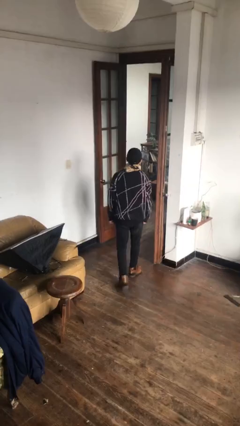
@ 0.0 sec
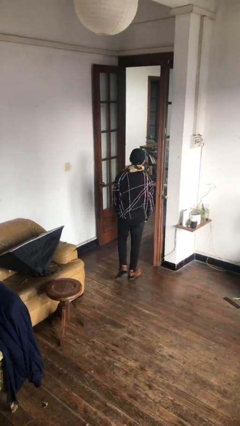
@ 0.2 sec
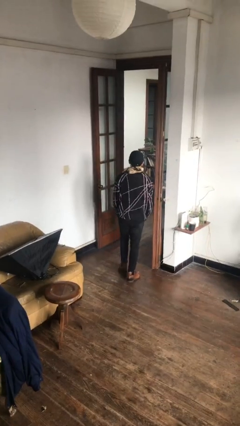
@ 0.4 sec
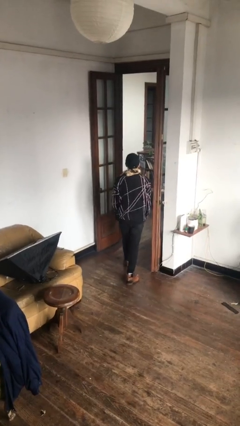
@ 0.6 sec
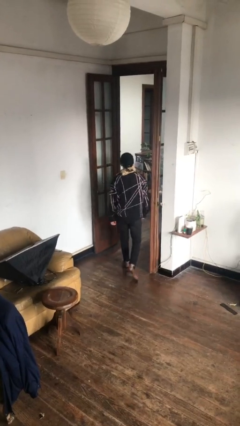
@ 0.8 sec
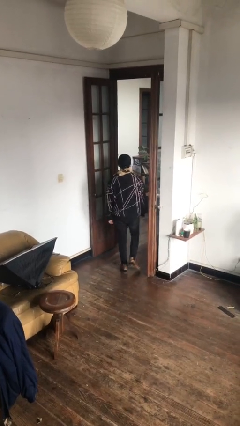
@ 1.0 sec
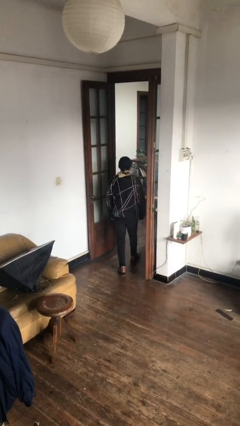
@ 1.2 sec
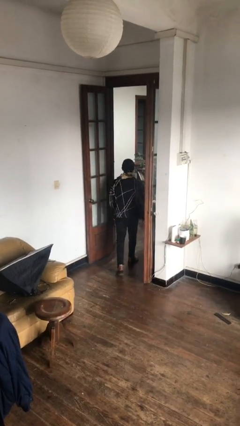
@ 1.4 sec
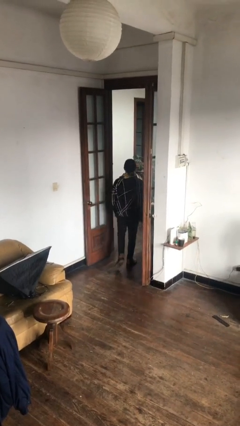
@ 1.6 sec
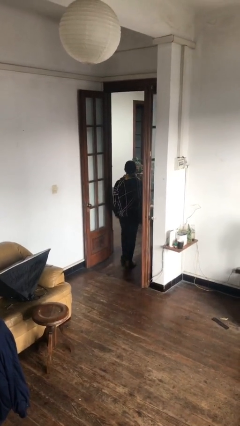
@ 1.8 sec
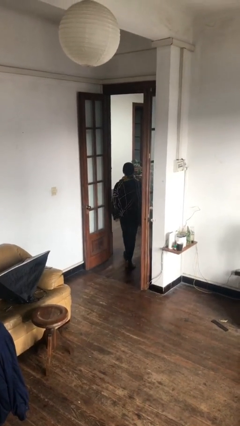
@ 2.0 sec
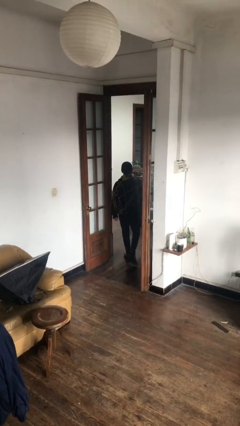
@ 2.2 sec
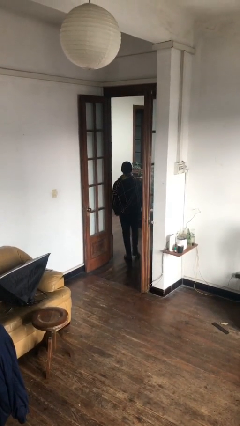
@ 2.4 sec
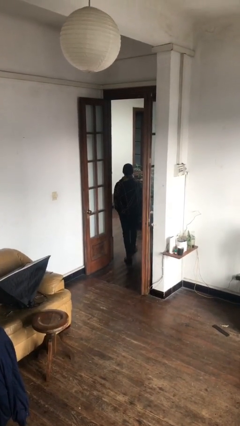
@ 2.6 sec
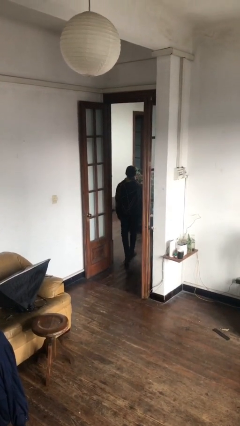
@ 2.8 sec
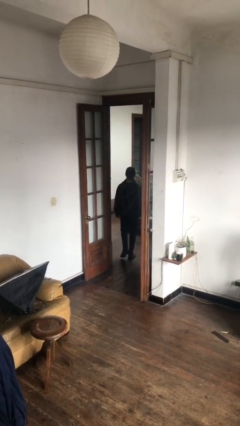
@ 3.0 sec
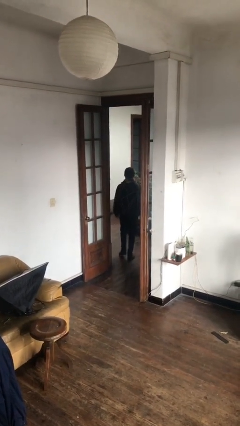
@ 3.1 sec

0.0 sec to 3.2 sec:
person exits scene through structure

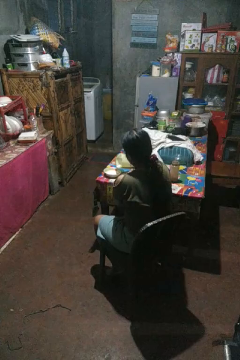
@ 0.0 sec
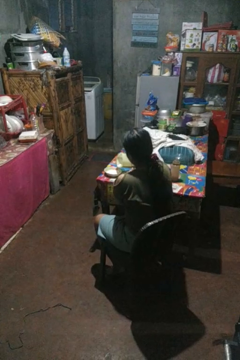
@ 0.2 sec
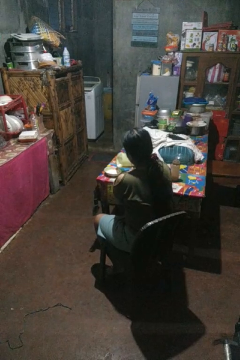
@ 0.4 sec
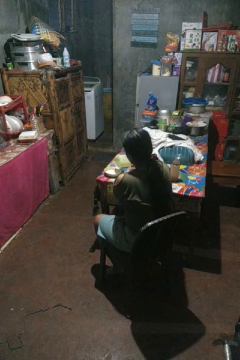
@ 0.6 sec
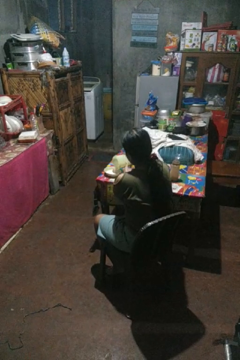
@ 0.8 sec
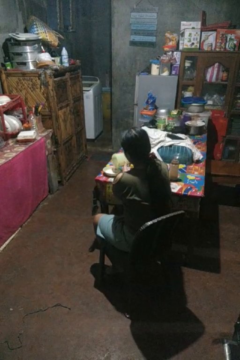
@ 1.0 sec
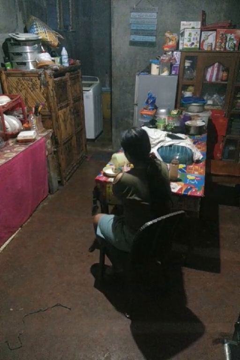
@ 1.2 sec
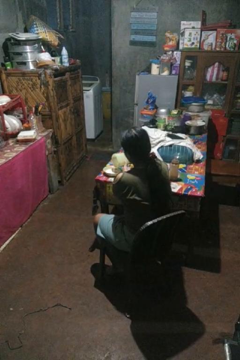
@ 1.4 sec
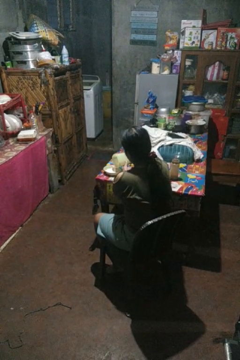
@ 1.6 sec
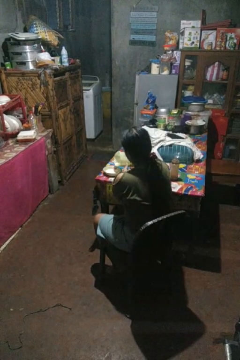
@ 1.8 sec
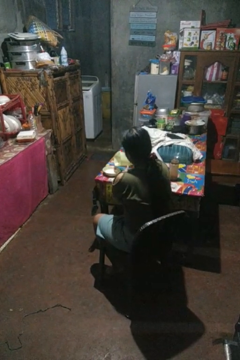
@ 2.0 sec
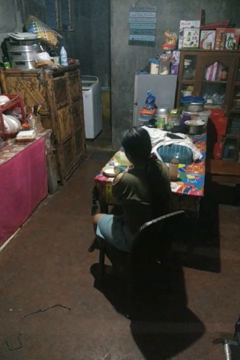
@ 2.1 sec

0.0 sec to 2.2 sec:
person pours into bowl

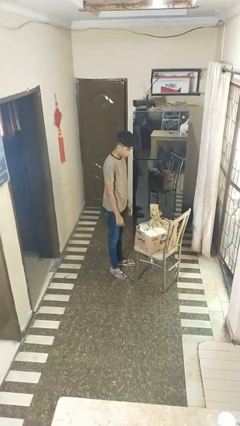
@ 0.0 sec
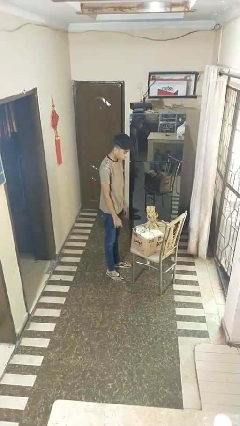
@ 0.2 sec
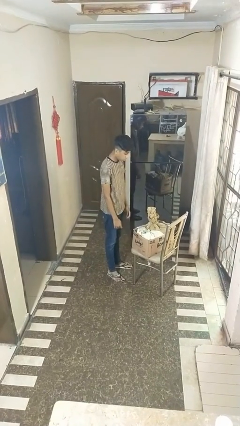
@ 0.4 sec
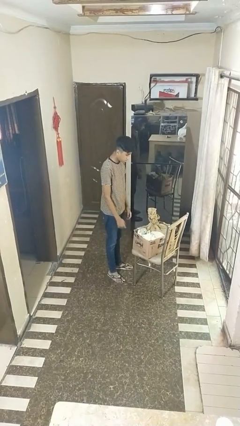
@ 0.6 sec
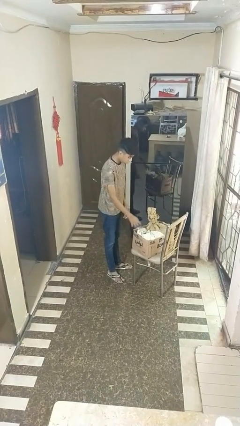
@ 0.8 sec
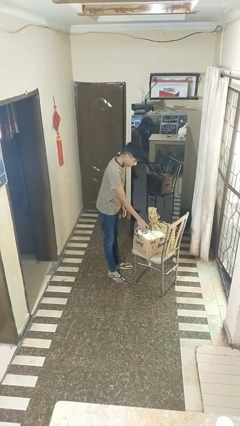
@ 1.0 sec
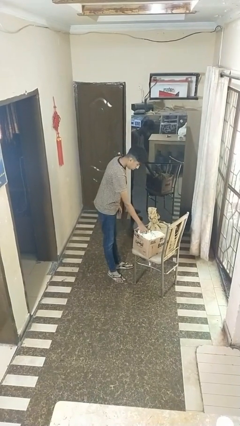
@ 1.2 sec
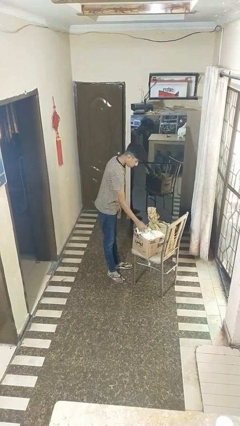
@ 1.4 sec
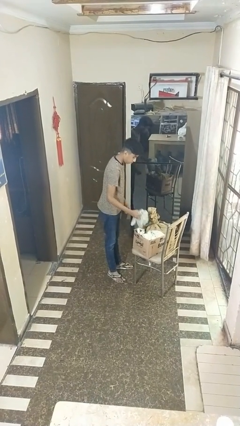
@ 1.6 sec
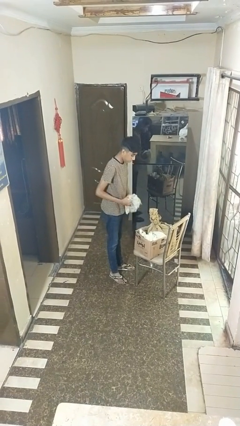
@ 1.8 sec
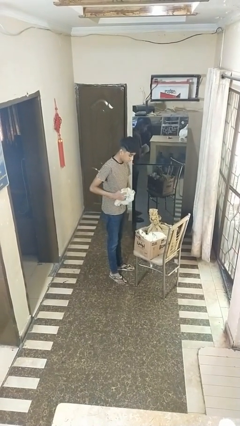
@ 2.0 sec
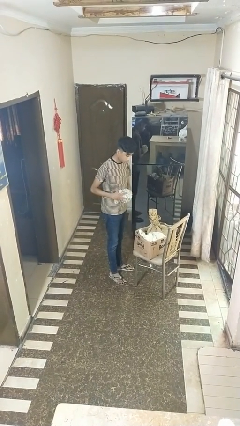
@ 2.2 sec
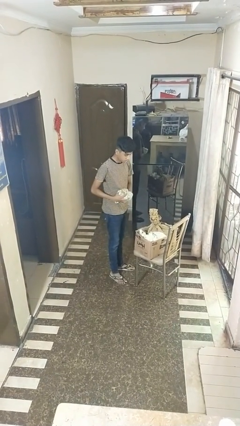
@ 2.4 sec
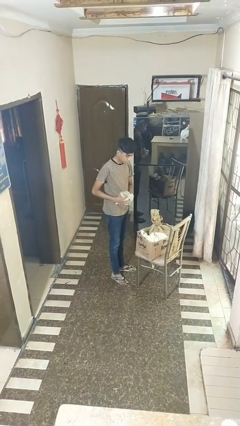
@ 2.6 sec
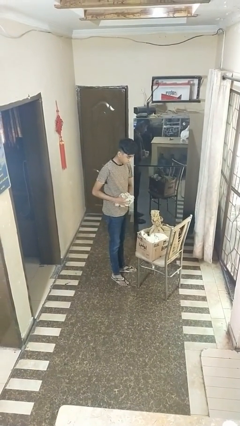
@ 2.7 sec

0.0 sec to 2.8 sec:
person takes object from box

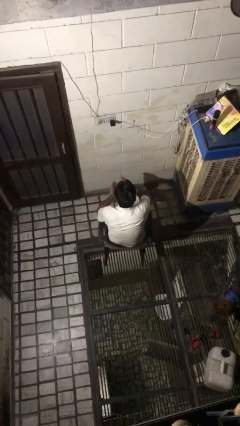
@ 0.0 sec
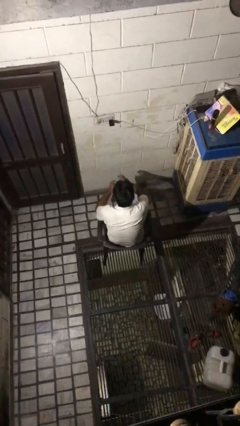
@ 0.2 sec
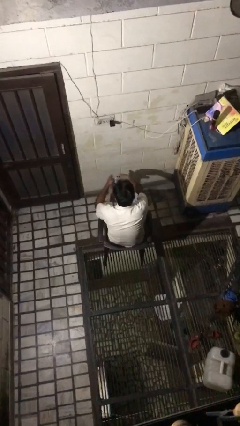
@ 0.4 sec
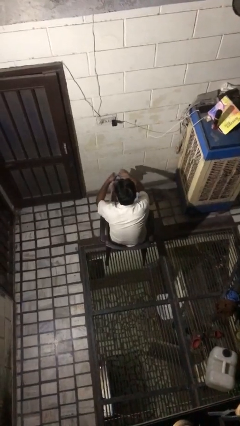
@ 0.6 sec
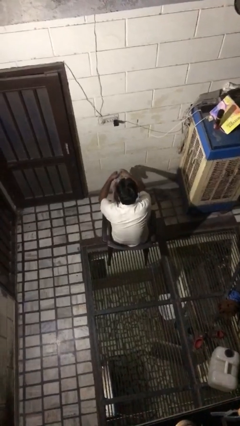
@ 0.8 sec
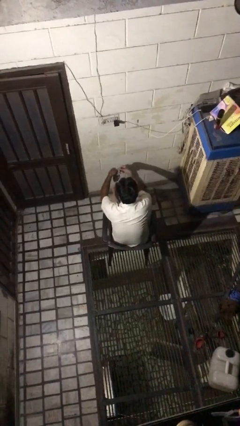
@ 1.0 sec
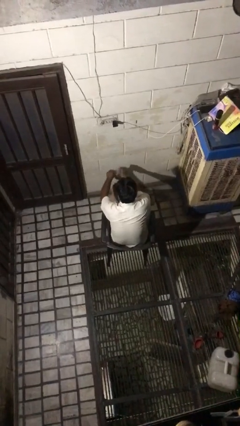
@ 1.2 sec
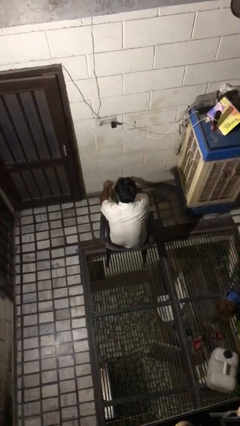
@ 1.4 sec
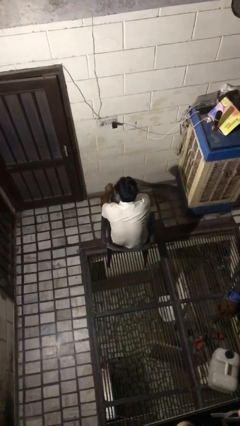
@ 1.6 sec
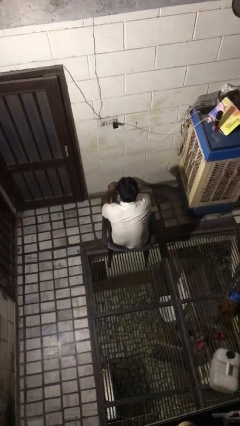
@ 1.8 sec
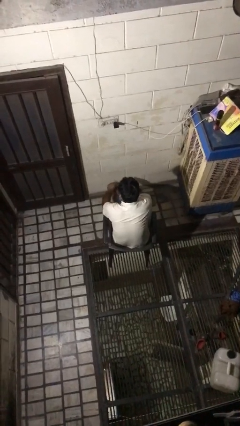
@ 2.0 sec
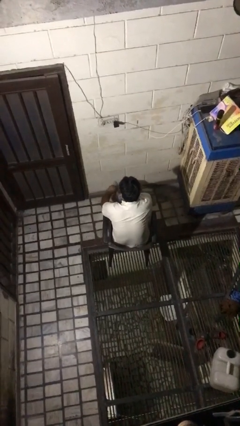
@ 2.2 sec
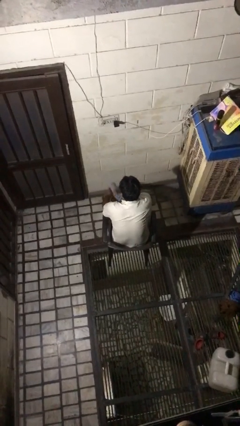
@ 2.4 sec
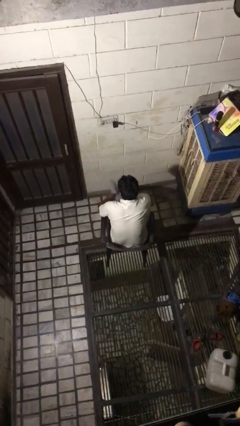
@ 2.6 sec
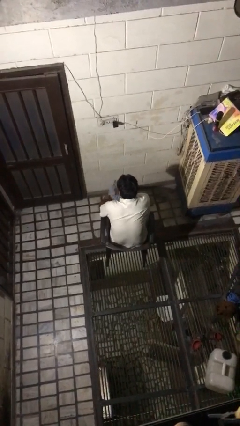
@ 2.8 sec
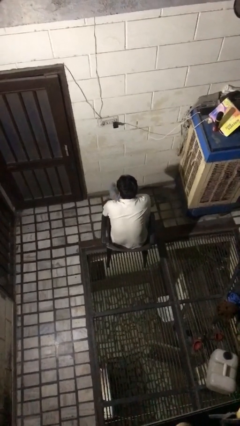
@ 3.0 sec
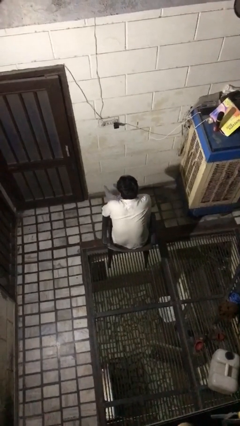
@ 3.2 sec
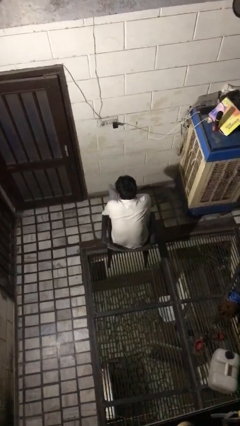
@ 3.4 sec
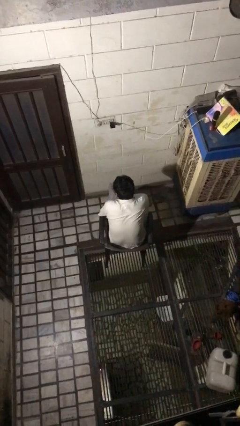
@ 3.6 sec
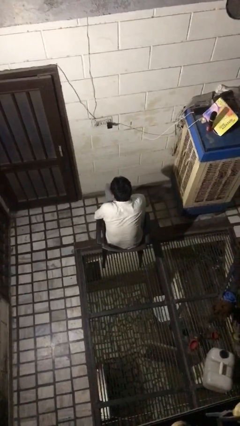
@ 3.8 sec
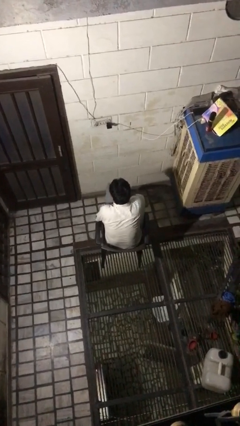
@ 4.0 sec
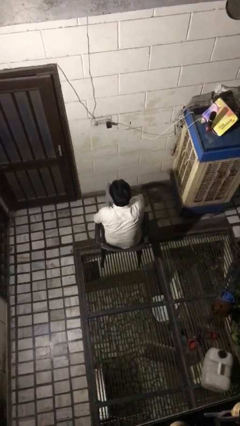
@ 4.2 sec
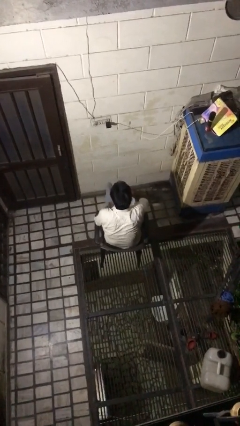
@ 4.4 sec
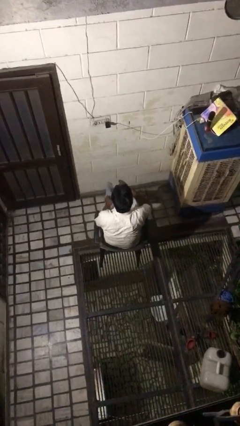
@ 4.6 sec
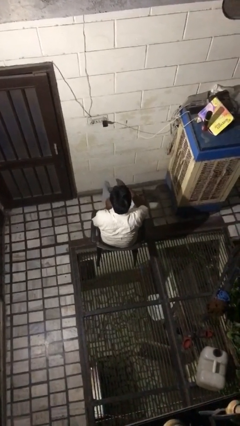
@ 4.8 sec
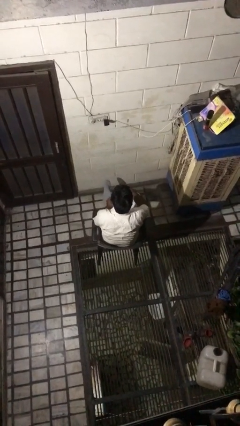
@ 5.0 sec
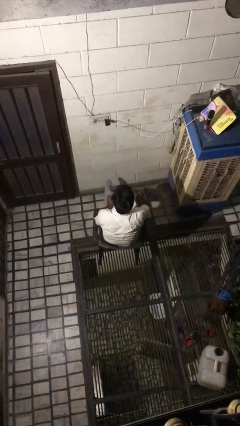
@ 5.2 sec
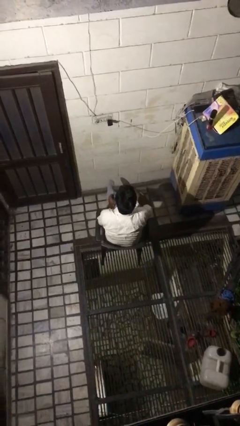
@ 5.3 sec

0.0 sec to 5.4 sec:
person puts on socks

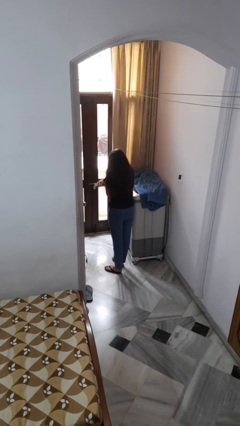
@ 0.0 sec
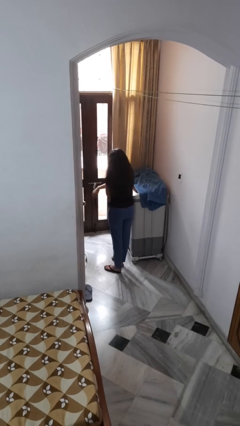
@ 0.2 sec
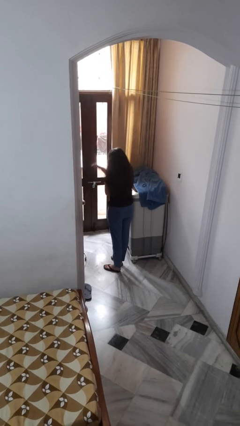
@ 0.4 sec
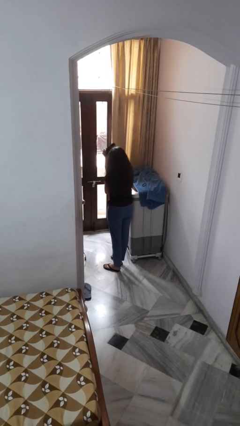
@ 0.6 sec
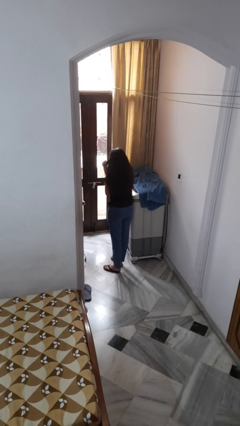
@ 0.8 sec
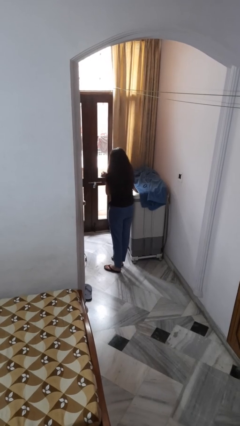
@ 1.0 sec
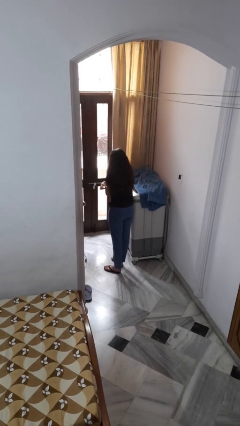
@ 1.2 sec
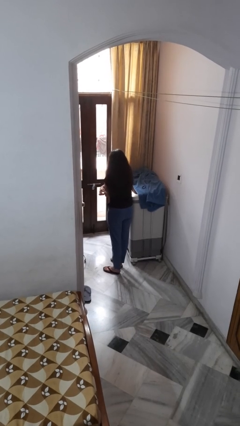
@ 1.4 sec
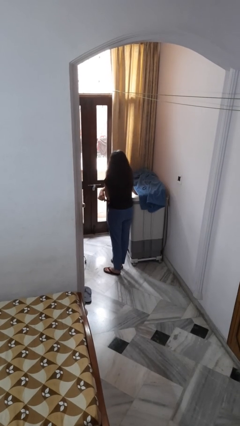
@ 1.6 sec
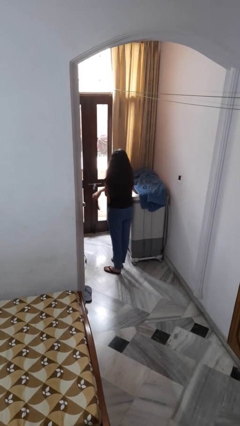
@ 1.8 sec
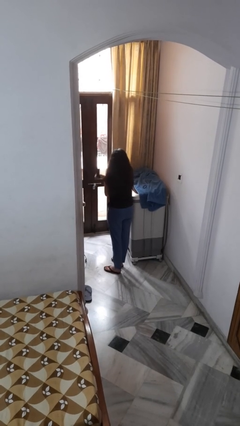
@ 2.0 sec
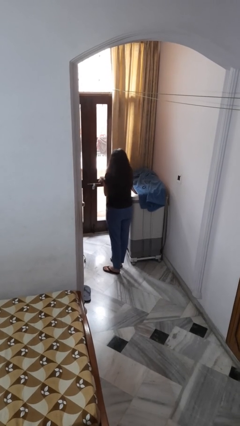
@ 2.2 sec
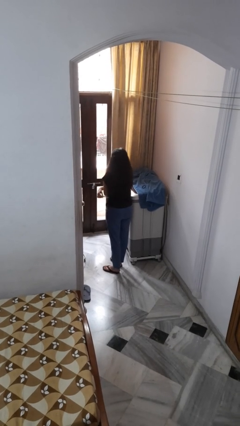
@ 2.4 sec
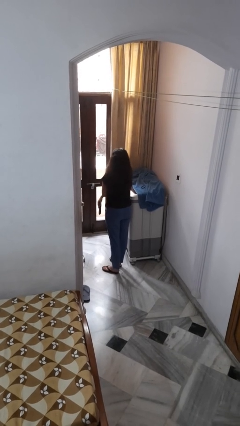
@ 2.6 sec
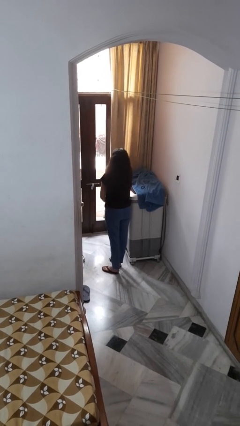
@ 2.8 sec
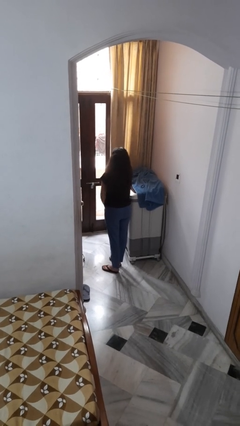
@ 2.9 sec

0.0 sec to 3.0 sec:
person brushes hair

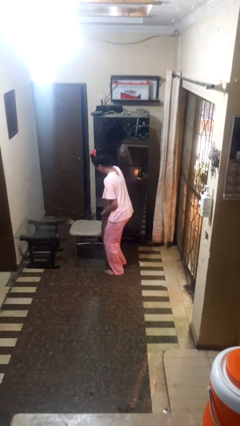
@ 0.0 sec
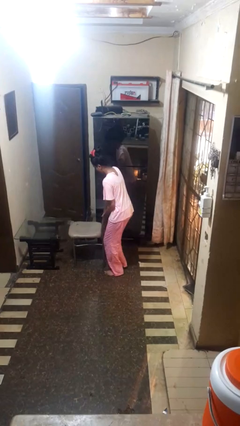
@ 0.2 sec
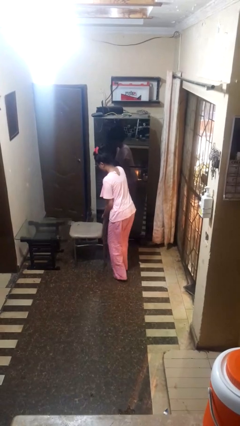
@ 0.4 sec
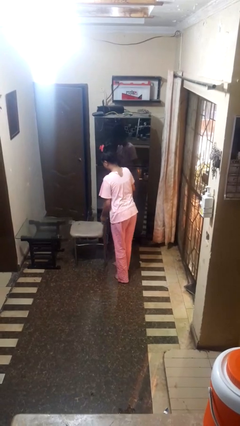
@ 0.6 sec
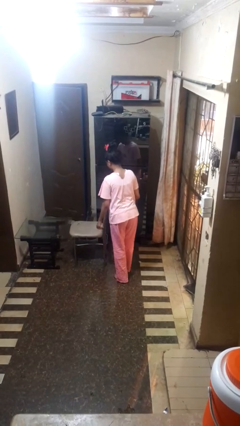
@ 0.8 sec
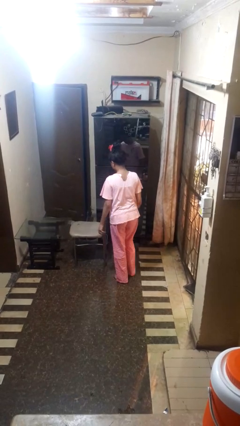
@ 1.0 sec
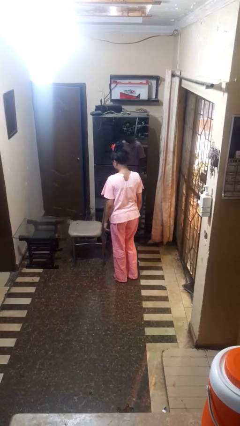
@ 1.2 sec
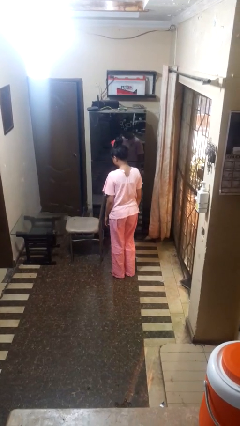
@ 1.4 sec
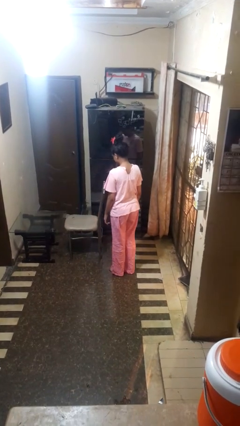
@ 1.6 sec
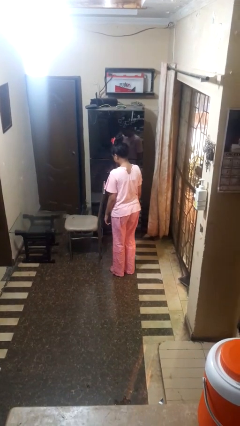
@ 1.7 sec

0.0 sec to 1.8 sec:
person pushes in chair
